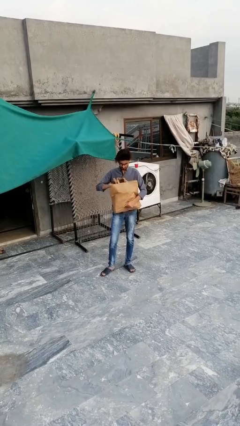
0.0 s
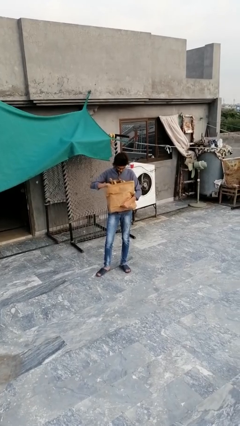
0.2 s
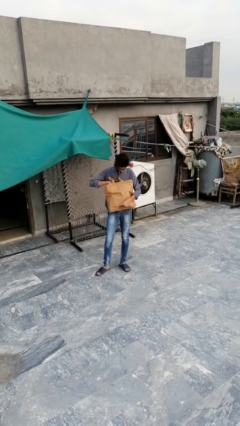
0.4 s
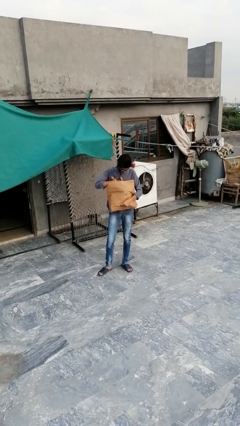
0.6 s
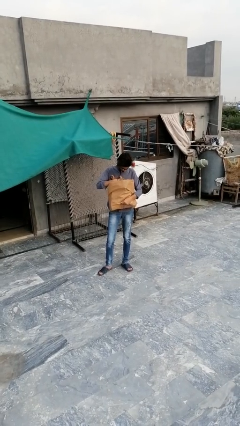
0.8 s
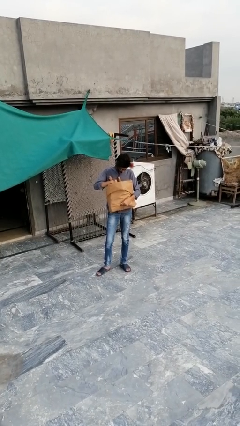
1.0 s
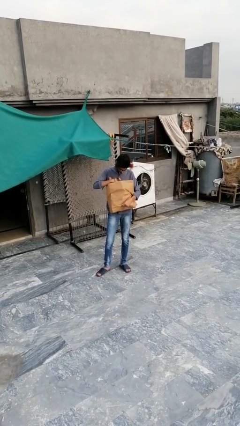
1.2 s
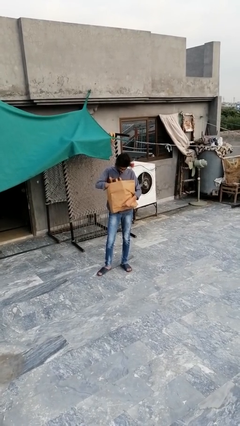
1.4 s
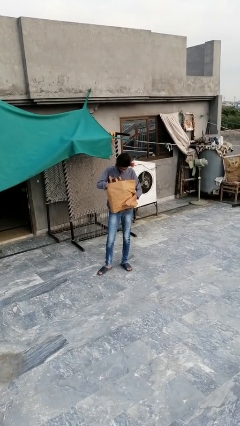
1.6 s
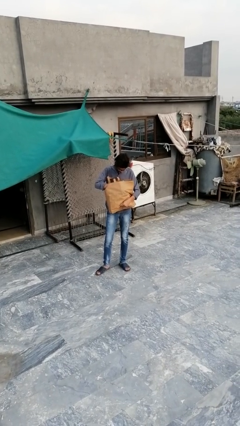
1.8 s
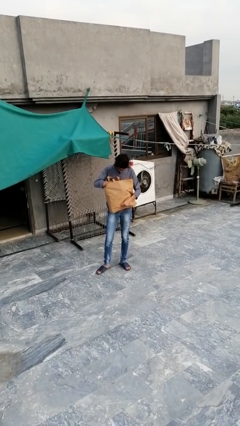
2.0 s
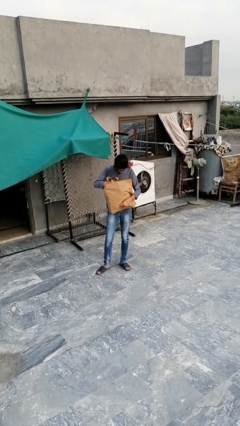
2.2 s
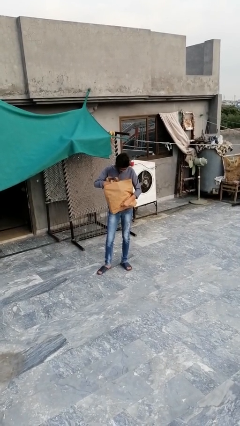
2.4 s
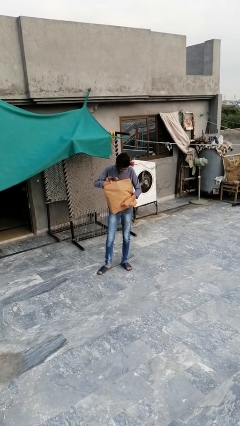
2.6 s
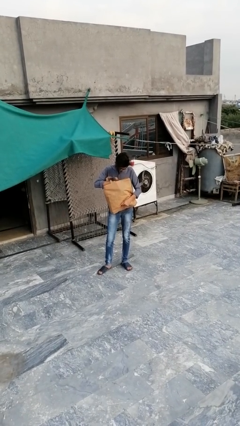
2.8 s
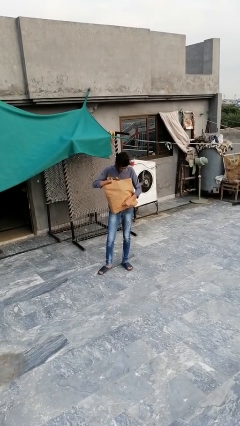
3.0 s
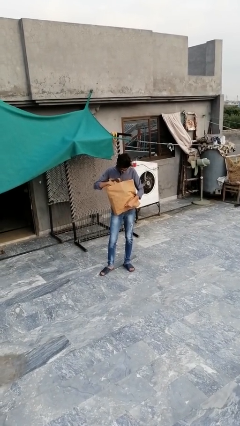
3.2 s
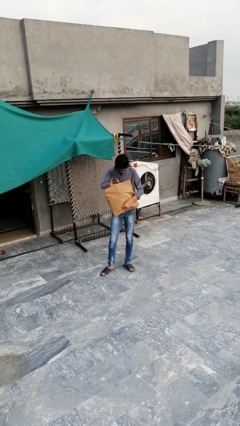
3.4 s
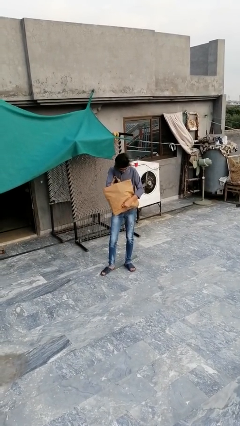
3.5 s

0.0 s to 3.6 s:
person searches in bag

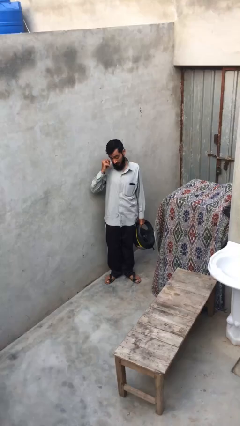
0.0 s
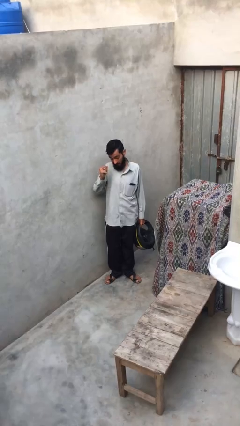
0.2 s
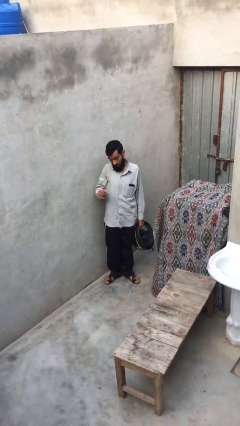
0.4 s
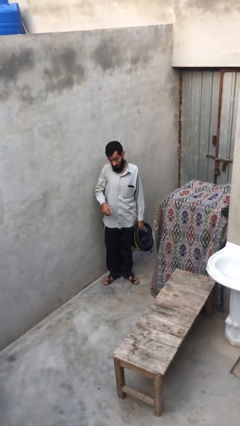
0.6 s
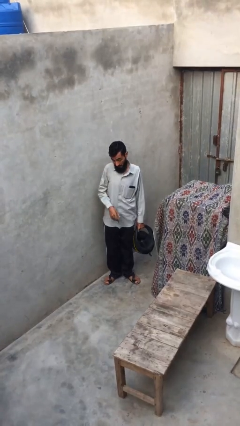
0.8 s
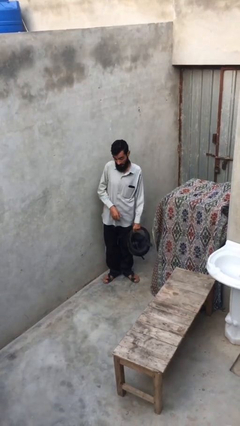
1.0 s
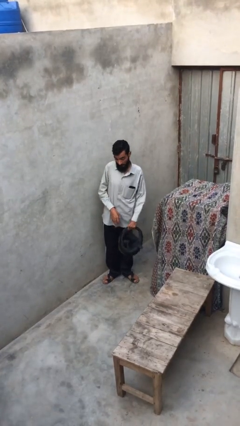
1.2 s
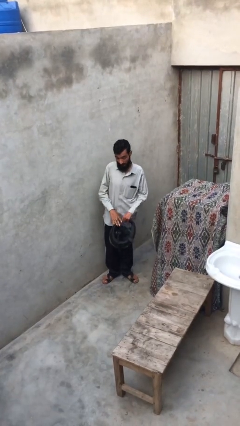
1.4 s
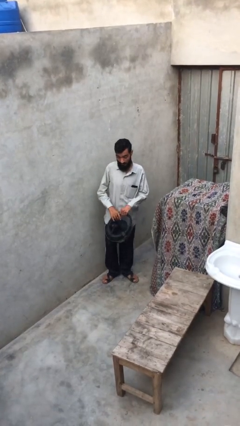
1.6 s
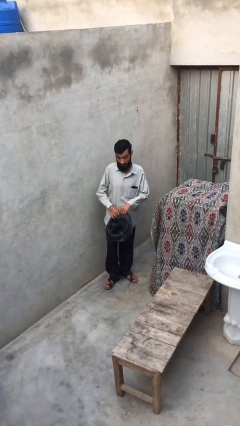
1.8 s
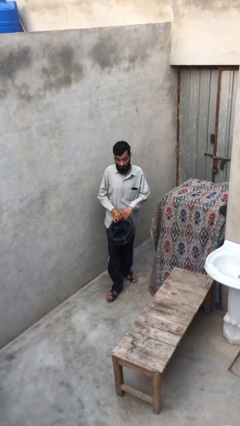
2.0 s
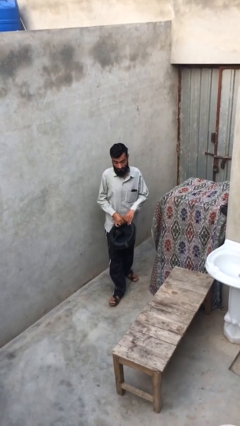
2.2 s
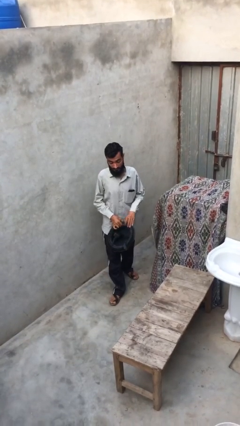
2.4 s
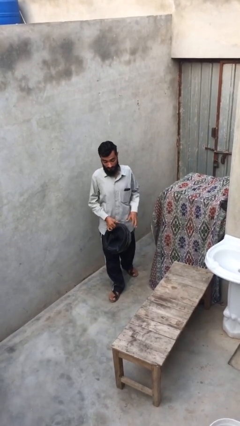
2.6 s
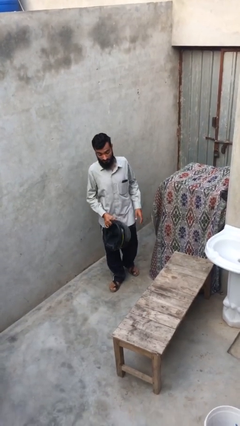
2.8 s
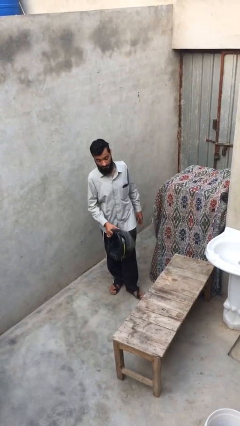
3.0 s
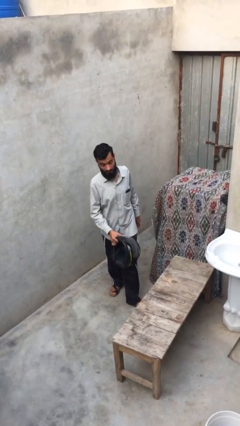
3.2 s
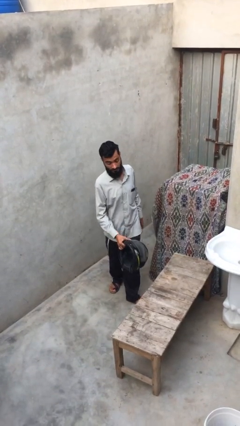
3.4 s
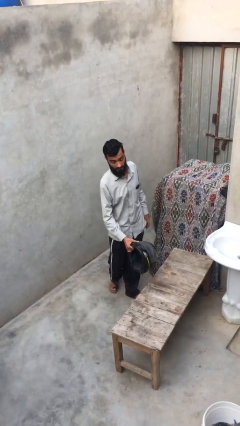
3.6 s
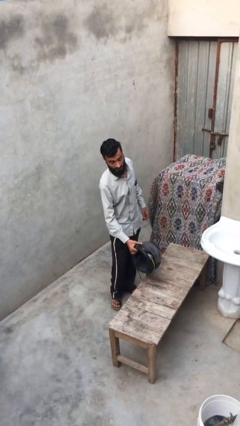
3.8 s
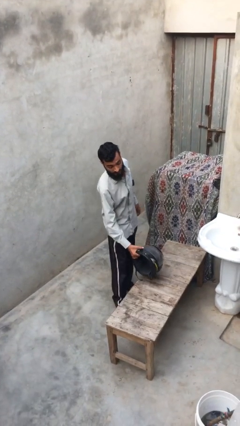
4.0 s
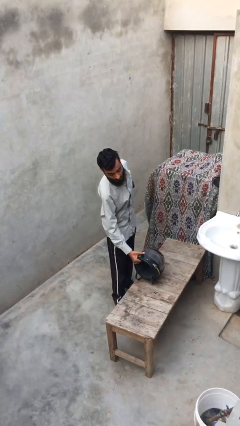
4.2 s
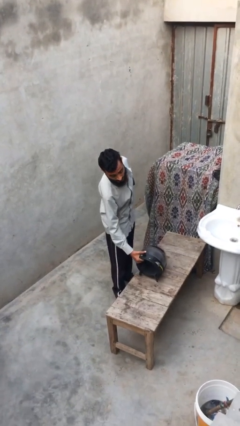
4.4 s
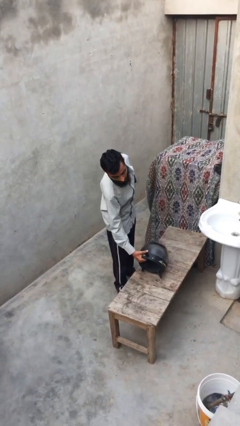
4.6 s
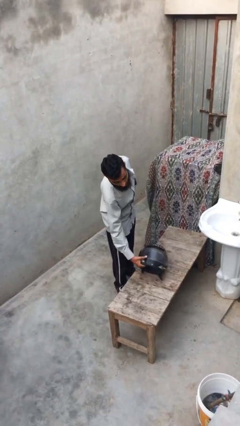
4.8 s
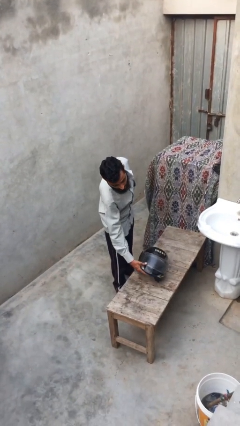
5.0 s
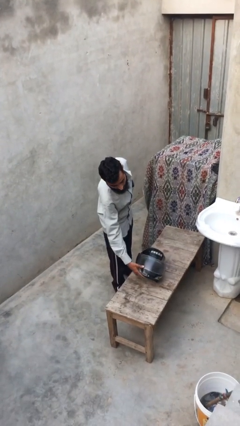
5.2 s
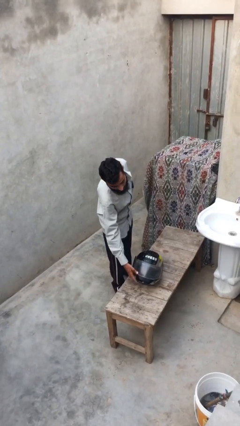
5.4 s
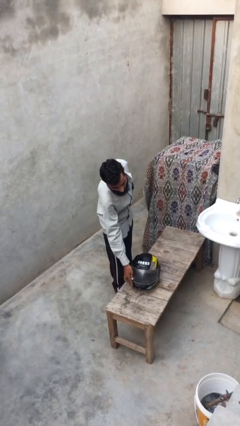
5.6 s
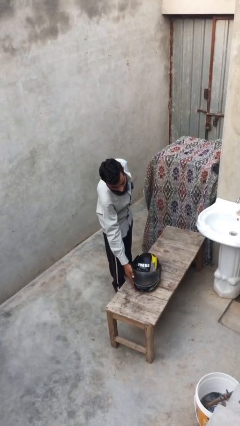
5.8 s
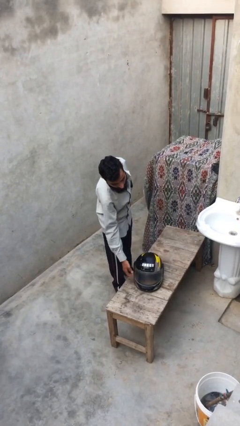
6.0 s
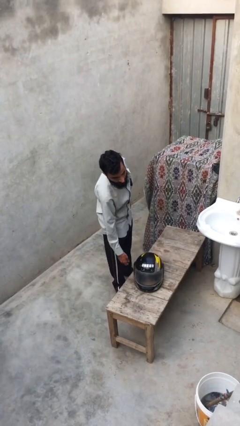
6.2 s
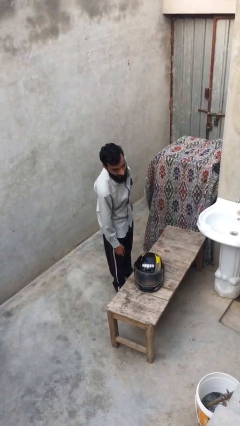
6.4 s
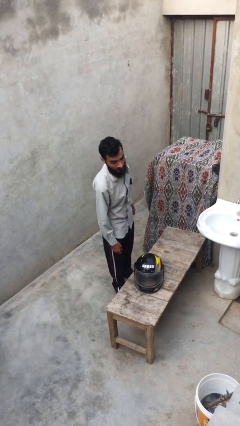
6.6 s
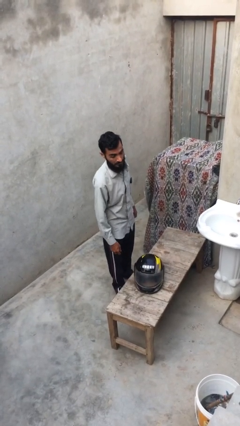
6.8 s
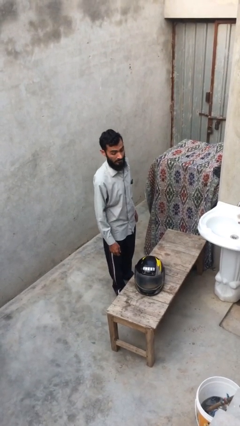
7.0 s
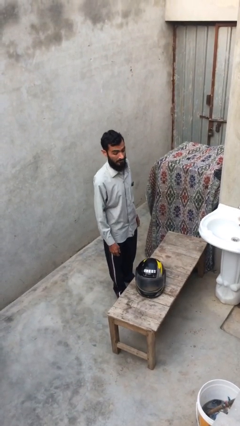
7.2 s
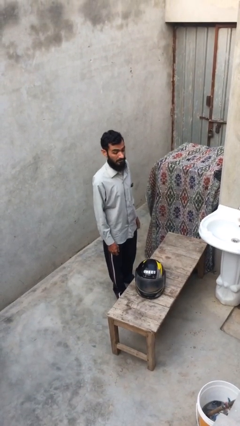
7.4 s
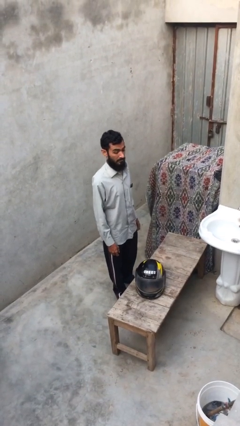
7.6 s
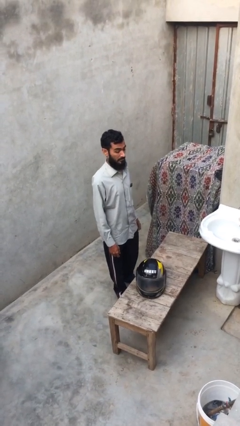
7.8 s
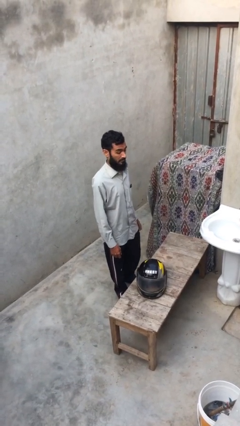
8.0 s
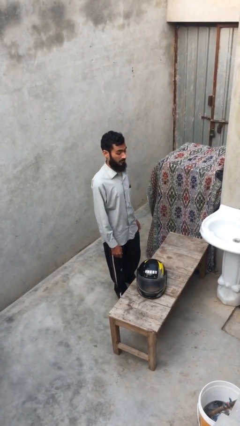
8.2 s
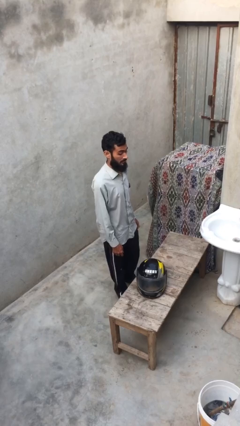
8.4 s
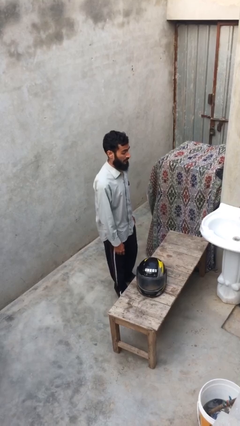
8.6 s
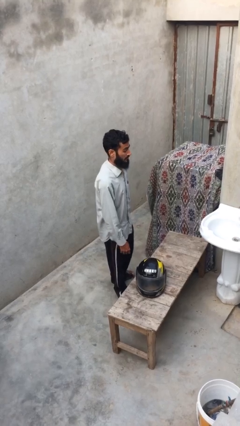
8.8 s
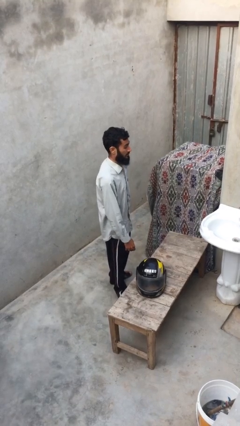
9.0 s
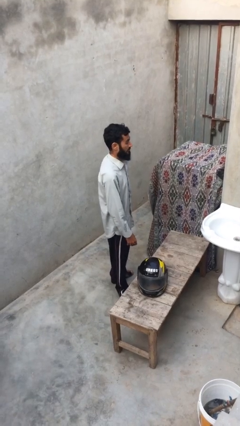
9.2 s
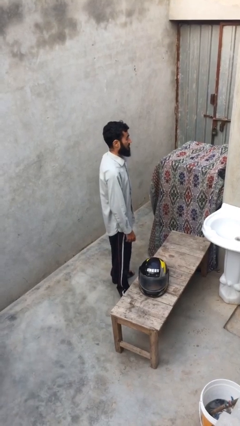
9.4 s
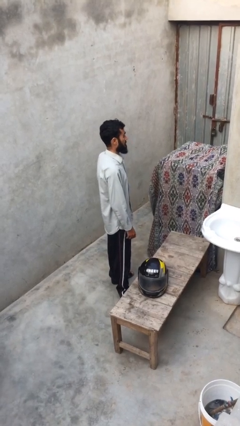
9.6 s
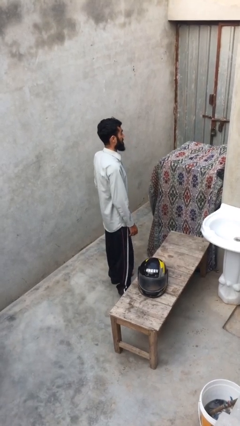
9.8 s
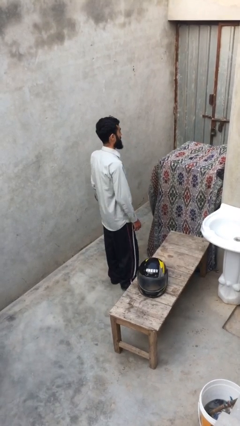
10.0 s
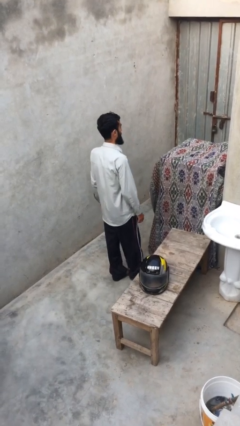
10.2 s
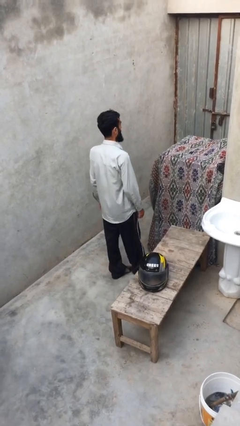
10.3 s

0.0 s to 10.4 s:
person puts down object on table

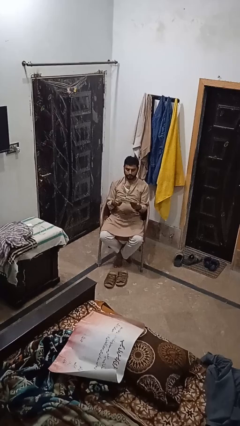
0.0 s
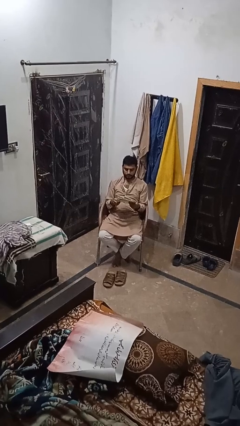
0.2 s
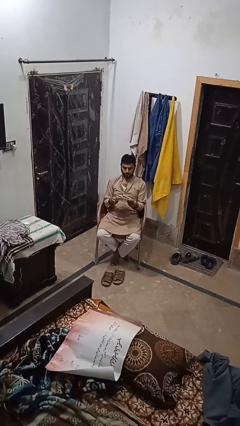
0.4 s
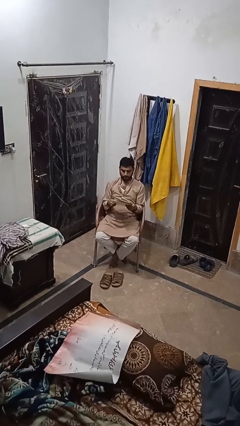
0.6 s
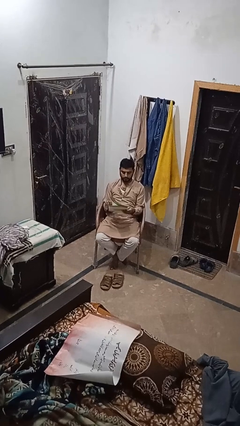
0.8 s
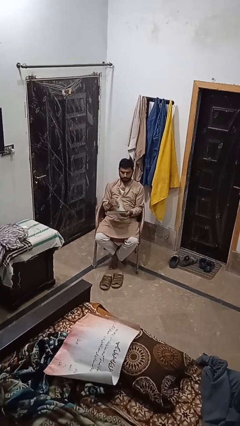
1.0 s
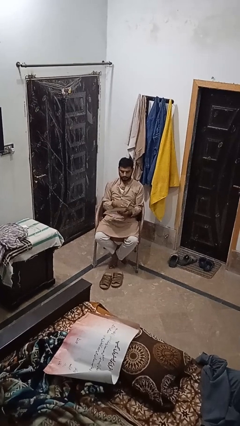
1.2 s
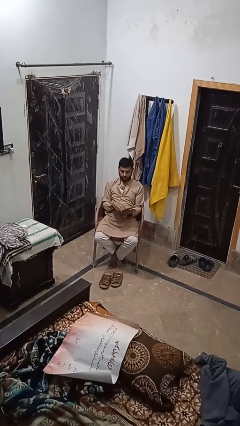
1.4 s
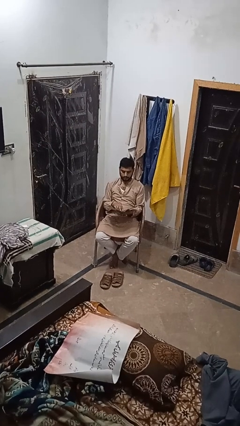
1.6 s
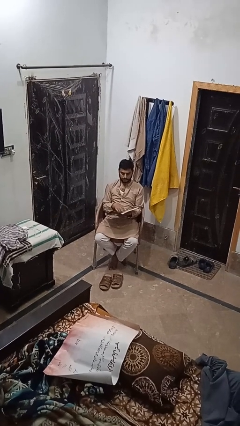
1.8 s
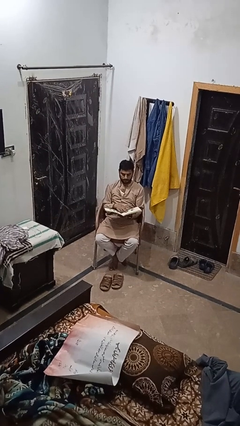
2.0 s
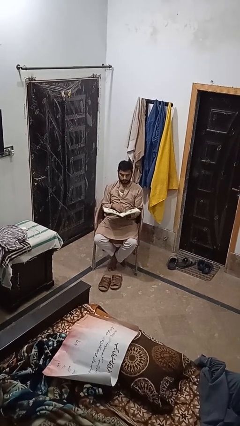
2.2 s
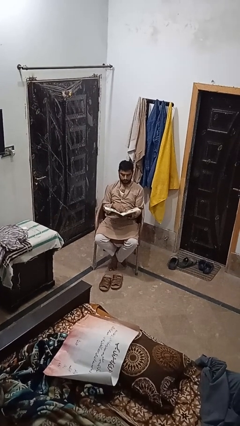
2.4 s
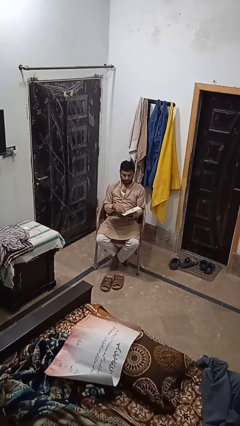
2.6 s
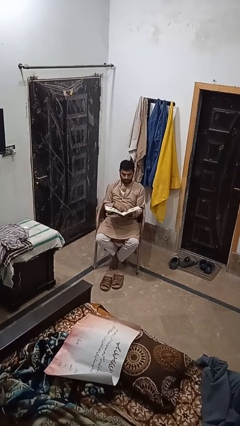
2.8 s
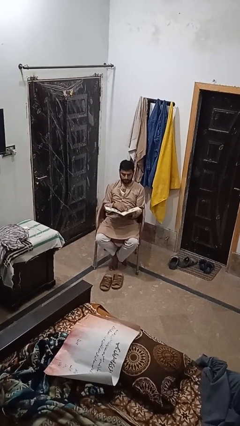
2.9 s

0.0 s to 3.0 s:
person reads magazine

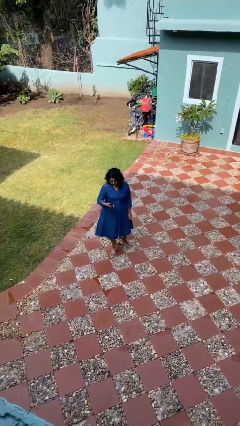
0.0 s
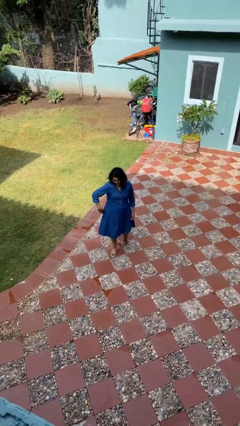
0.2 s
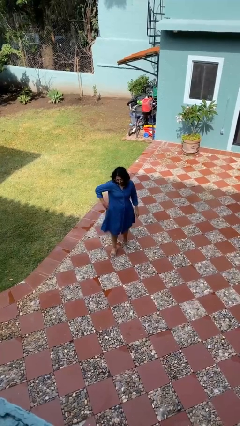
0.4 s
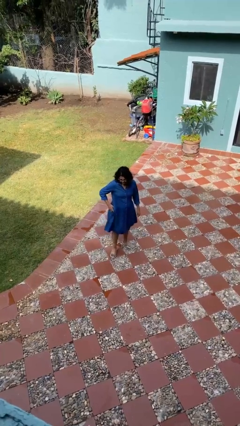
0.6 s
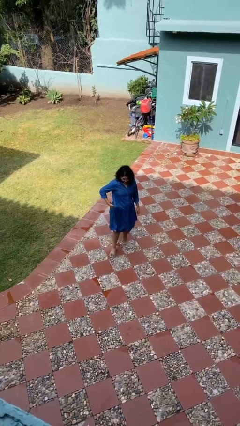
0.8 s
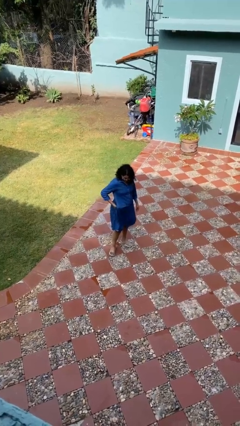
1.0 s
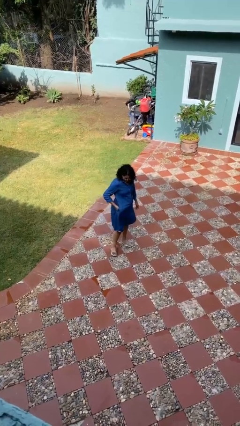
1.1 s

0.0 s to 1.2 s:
person puts phone into pocket
